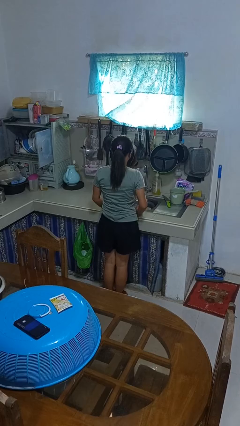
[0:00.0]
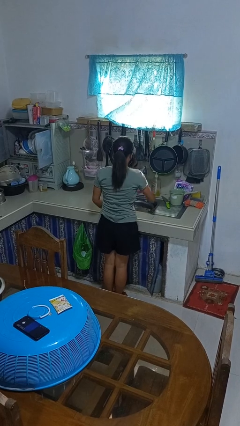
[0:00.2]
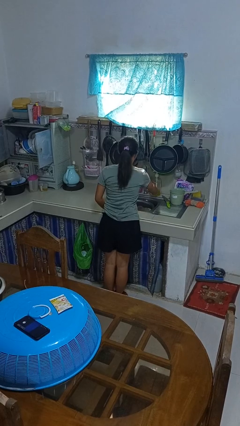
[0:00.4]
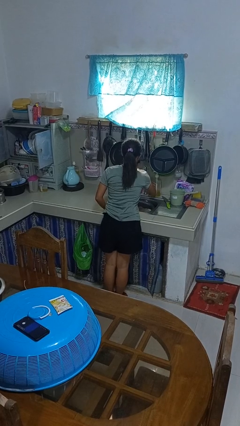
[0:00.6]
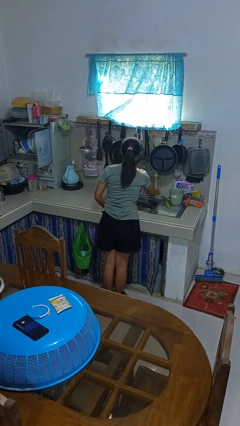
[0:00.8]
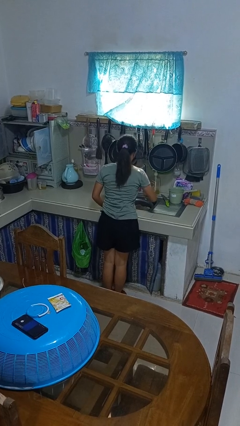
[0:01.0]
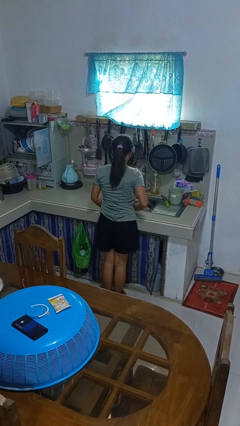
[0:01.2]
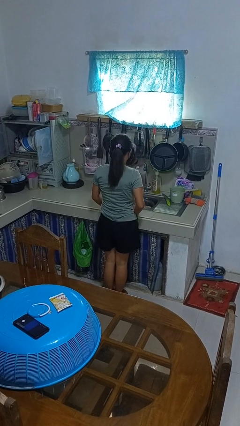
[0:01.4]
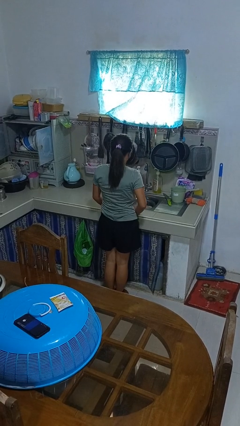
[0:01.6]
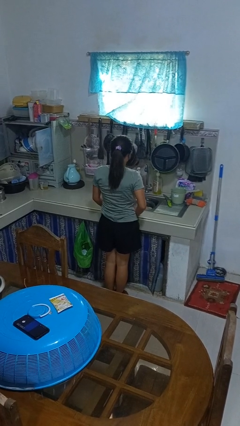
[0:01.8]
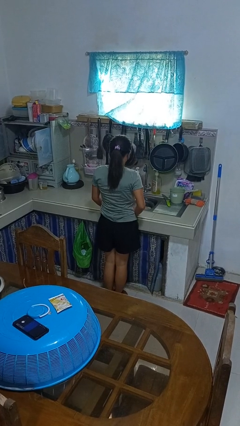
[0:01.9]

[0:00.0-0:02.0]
person turns off faucet

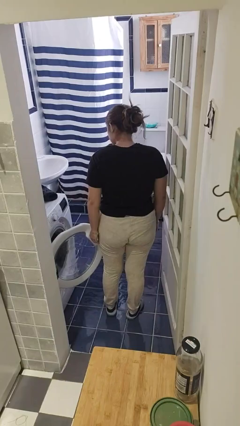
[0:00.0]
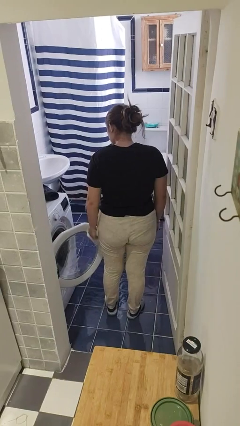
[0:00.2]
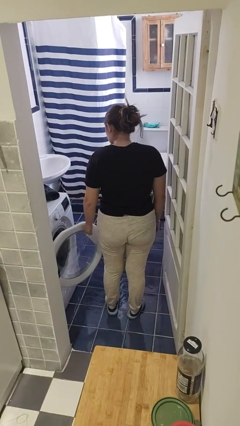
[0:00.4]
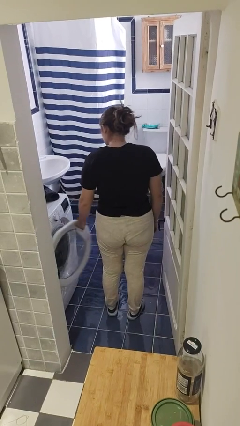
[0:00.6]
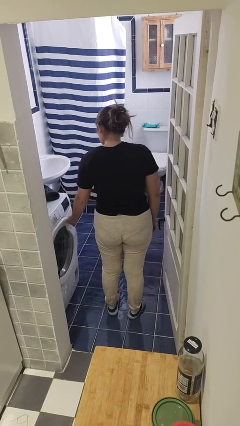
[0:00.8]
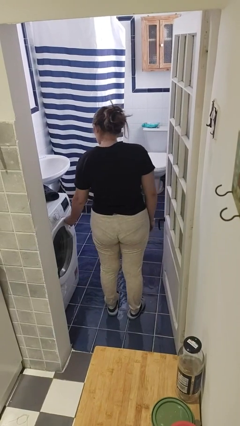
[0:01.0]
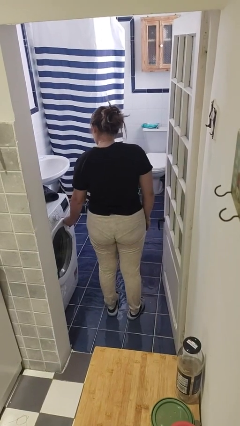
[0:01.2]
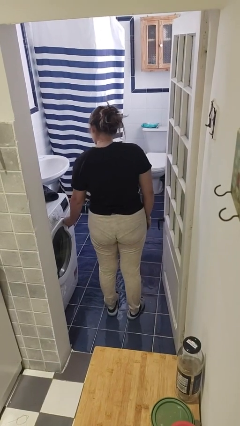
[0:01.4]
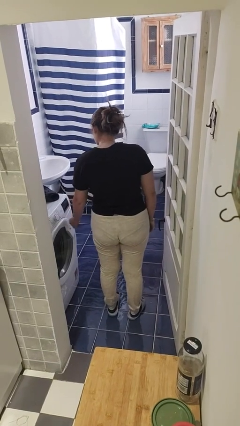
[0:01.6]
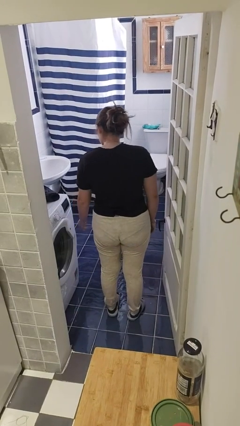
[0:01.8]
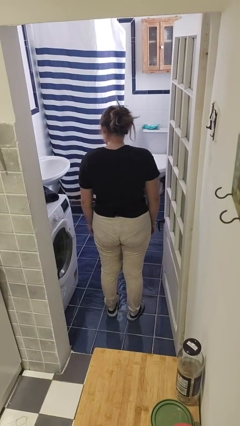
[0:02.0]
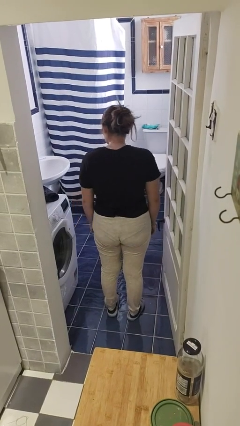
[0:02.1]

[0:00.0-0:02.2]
person closes clothes washer

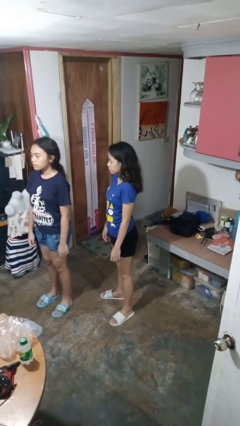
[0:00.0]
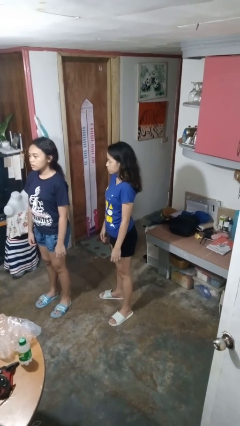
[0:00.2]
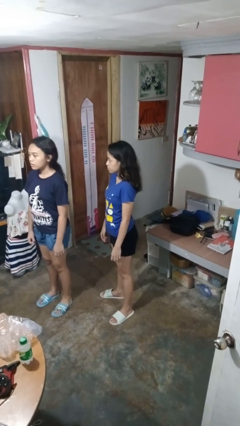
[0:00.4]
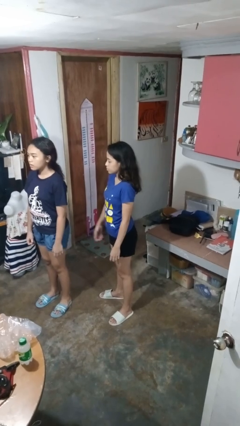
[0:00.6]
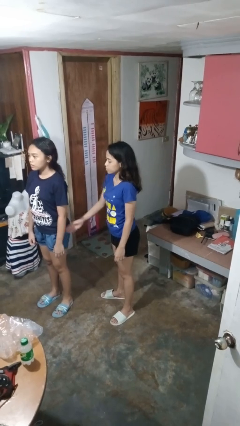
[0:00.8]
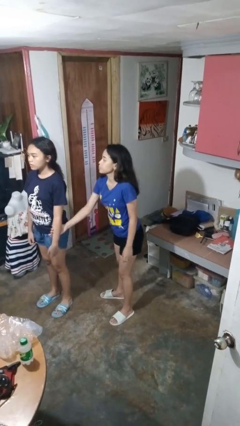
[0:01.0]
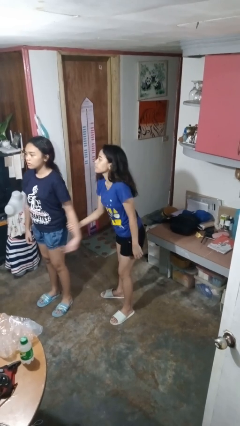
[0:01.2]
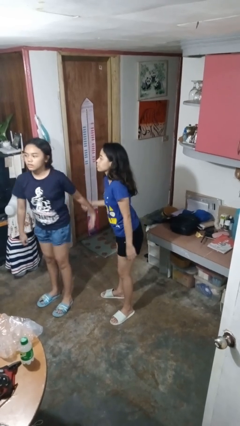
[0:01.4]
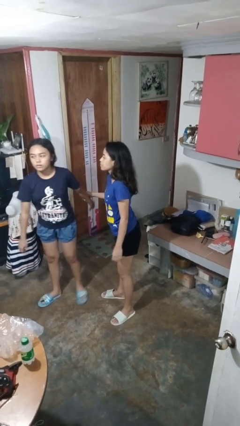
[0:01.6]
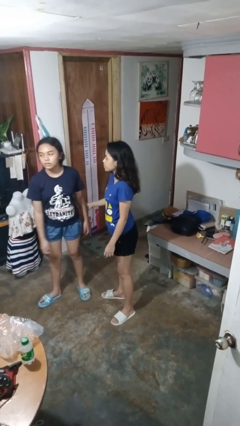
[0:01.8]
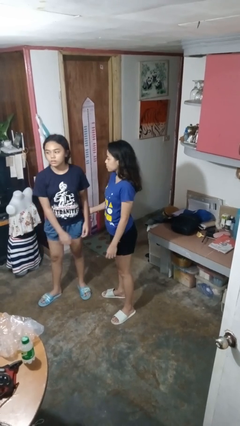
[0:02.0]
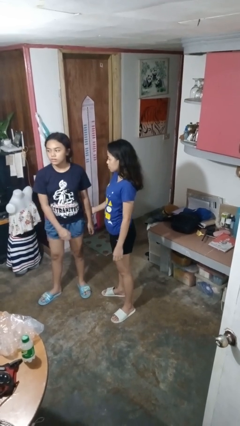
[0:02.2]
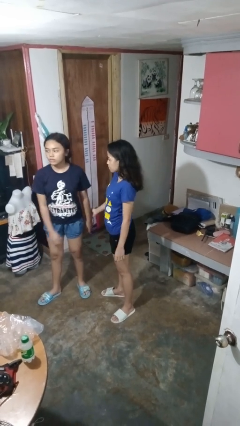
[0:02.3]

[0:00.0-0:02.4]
person grabs person by forearm

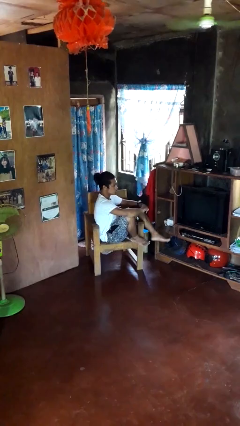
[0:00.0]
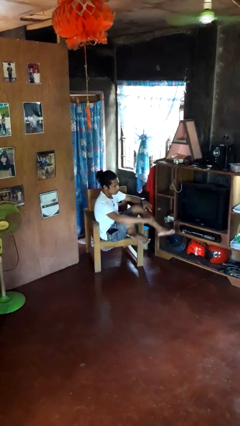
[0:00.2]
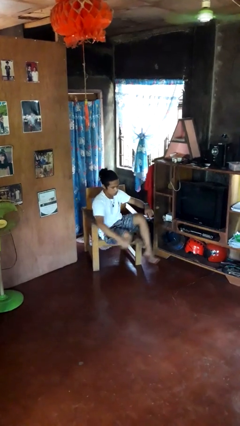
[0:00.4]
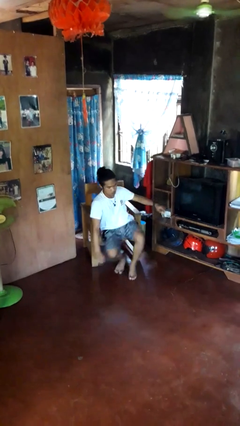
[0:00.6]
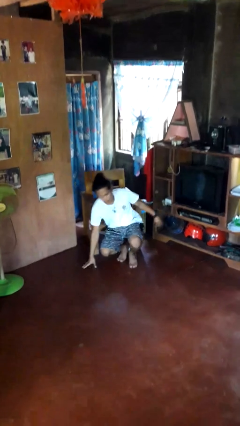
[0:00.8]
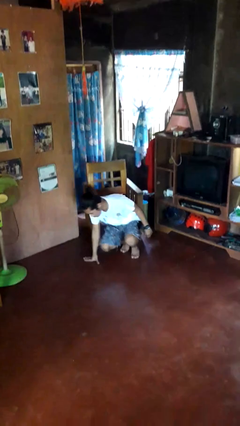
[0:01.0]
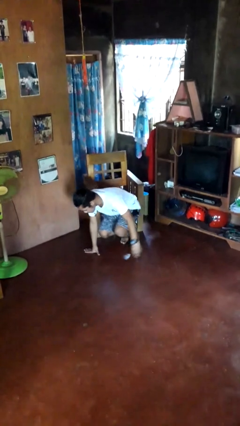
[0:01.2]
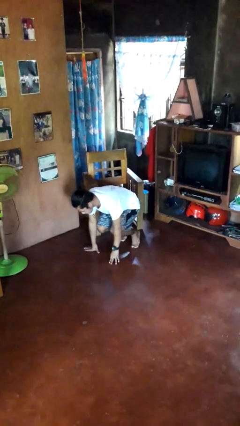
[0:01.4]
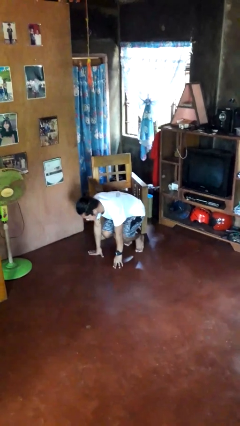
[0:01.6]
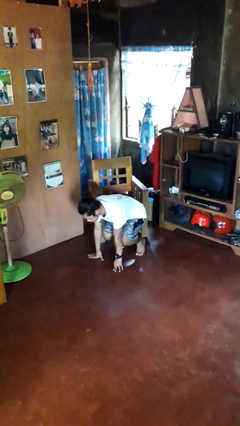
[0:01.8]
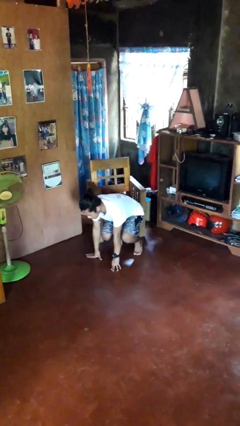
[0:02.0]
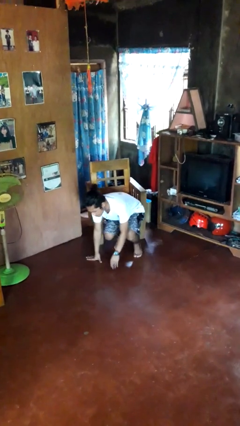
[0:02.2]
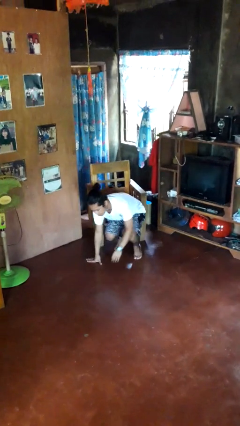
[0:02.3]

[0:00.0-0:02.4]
person falls from chair

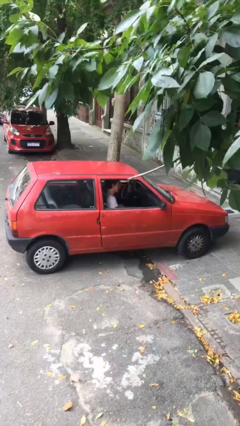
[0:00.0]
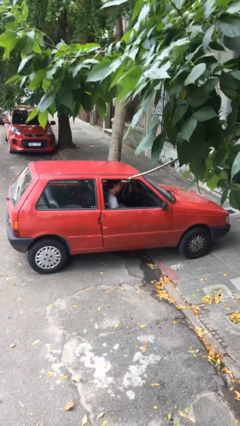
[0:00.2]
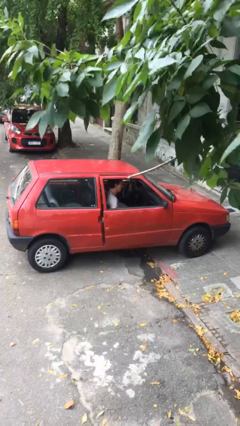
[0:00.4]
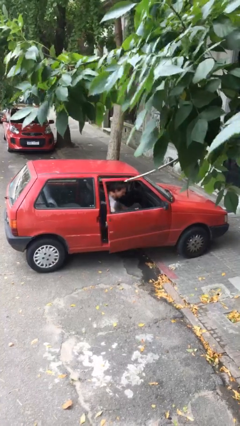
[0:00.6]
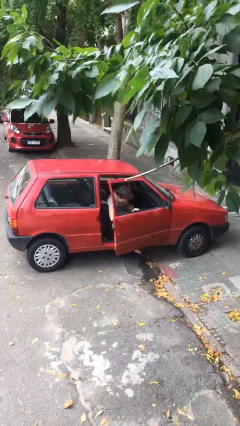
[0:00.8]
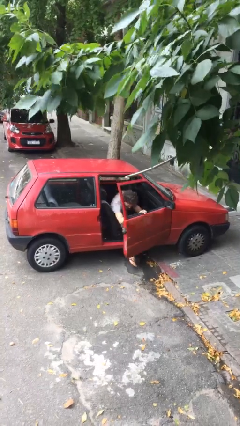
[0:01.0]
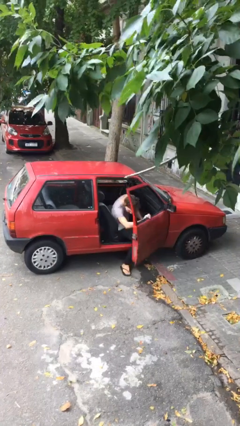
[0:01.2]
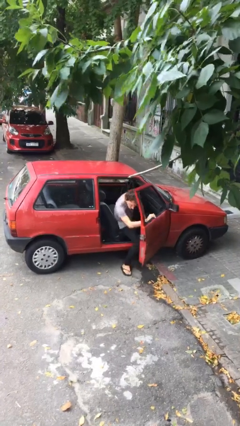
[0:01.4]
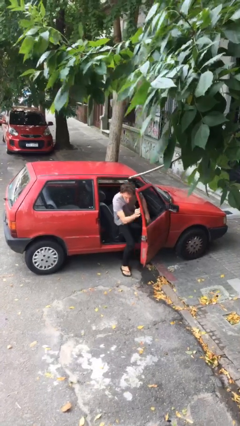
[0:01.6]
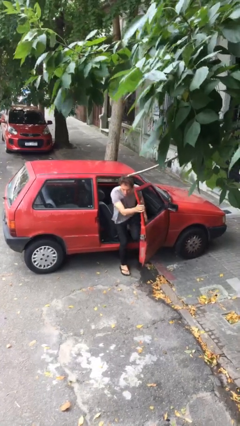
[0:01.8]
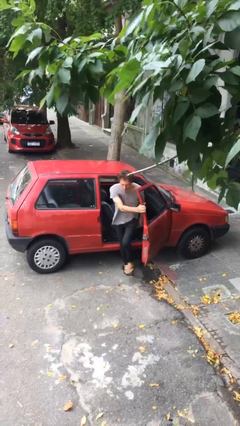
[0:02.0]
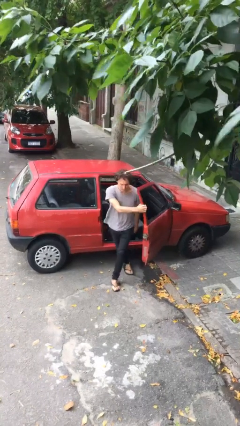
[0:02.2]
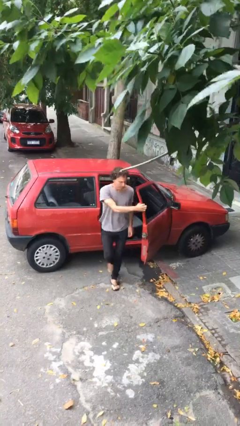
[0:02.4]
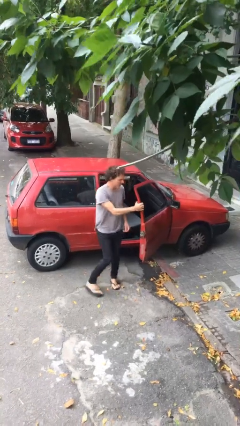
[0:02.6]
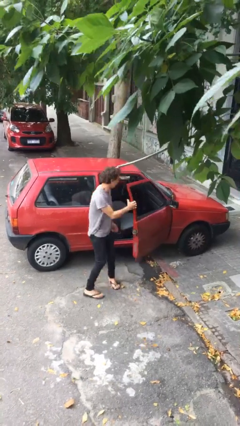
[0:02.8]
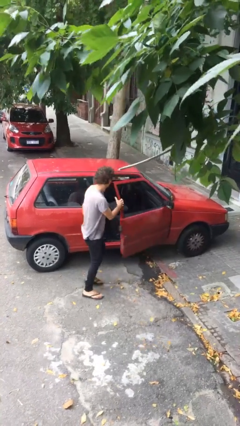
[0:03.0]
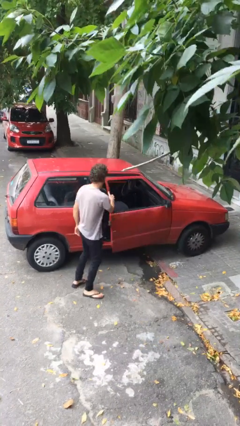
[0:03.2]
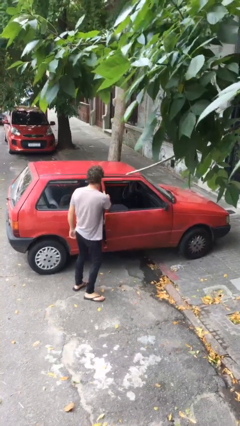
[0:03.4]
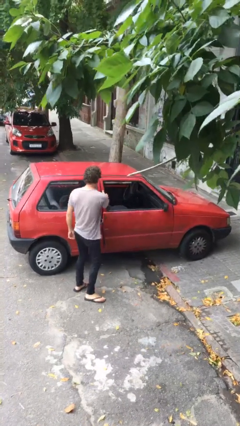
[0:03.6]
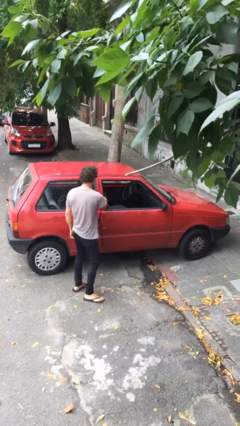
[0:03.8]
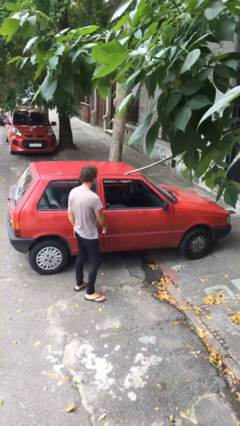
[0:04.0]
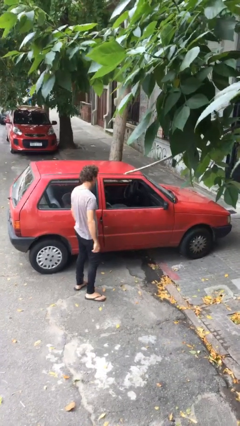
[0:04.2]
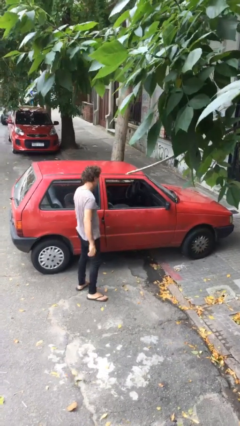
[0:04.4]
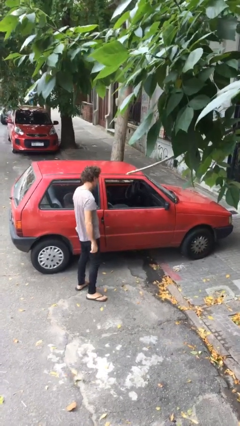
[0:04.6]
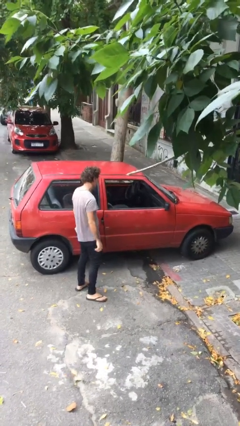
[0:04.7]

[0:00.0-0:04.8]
car drops off person

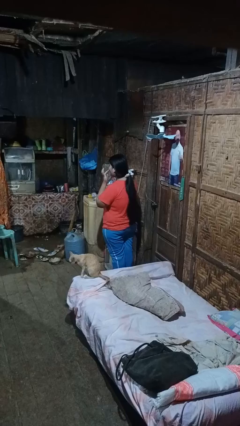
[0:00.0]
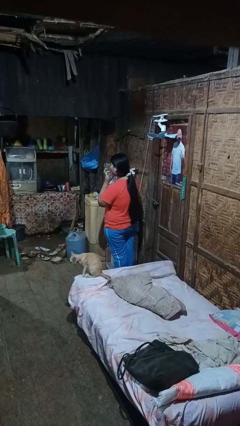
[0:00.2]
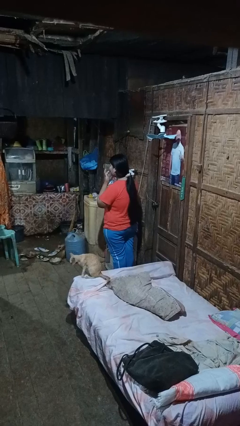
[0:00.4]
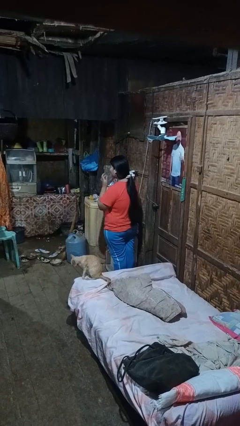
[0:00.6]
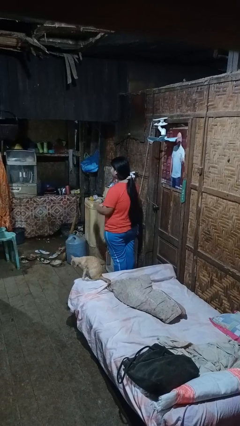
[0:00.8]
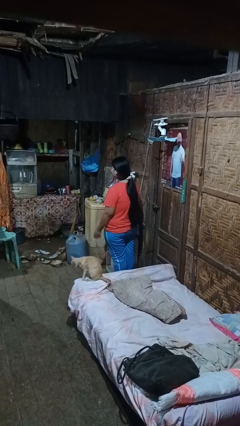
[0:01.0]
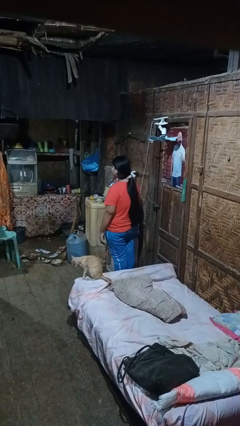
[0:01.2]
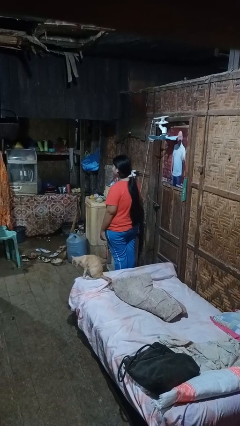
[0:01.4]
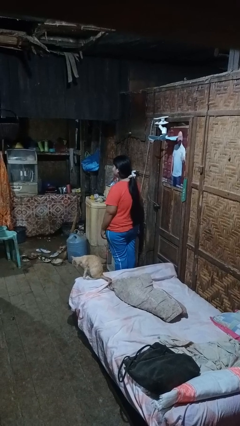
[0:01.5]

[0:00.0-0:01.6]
person licks fingers

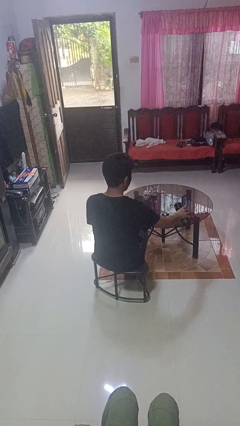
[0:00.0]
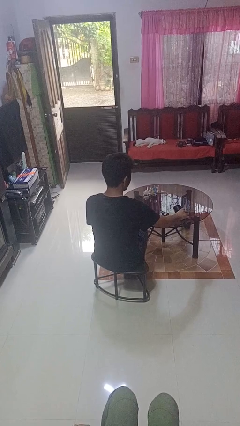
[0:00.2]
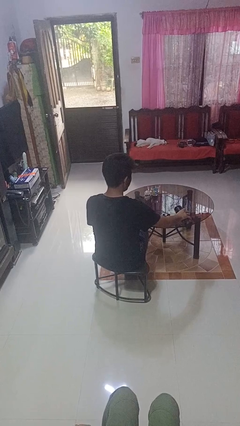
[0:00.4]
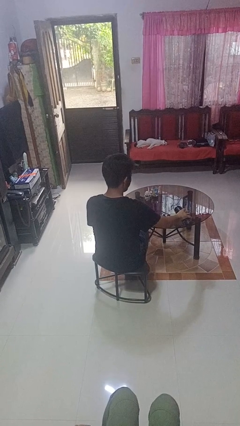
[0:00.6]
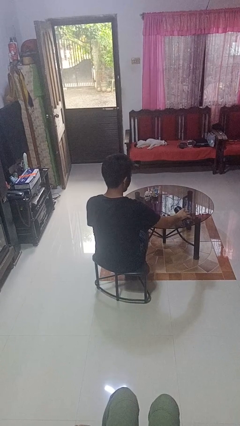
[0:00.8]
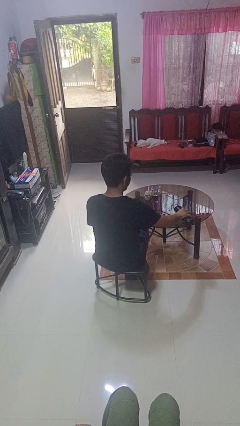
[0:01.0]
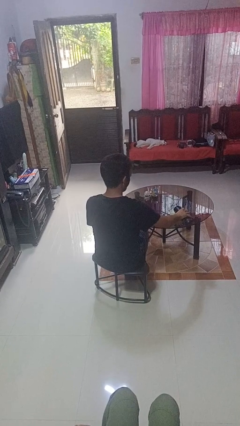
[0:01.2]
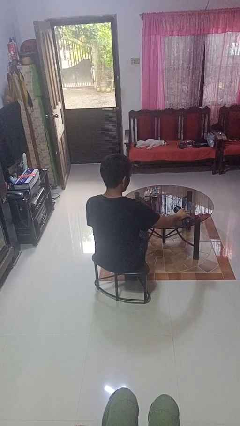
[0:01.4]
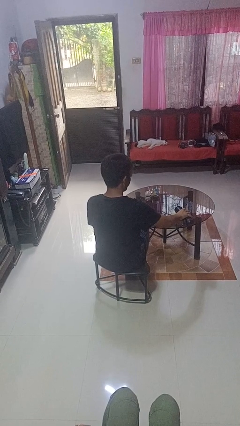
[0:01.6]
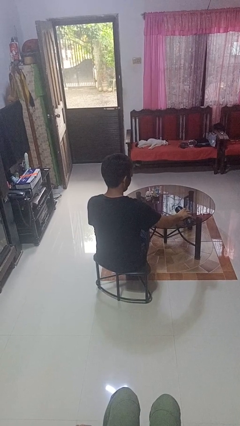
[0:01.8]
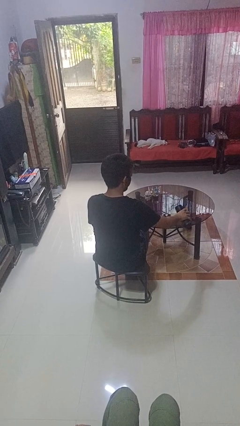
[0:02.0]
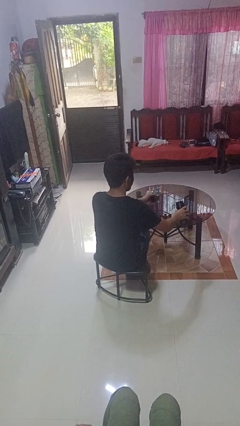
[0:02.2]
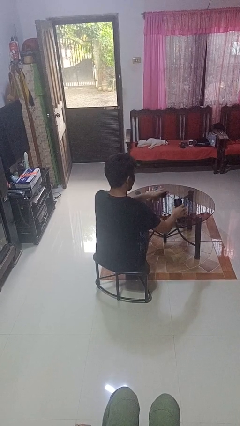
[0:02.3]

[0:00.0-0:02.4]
person pours liquid into cup
